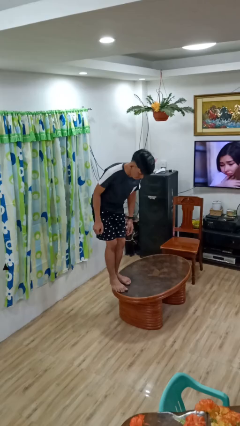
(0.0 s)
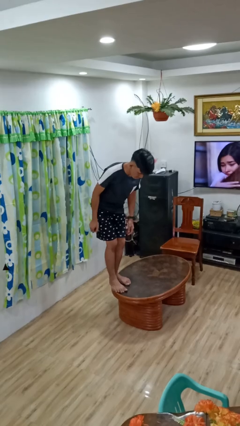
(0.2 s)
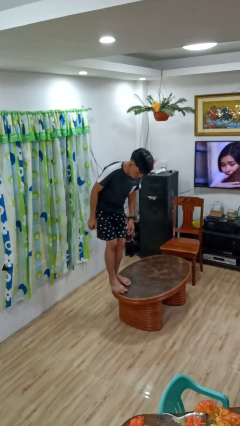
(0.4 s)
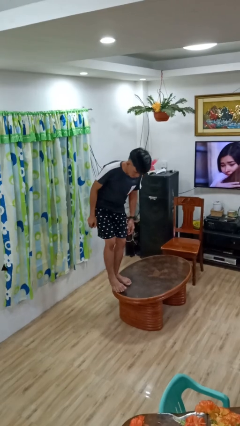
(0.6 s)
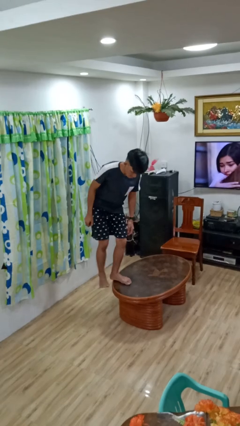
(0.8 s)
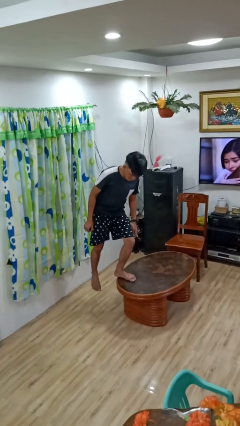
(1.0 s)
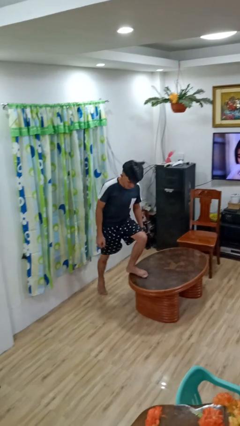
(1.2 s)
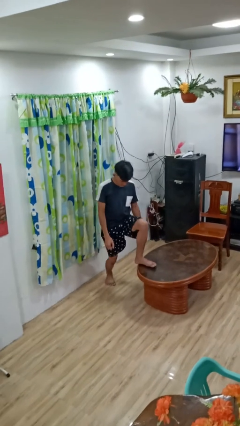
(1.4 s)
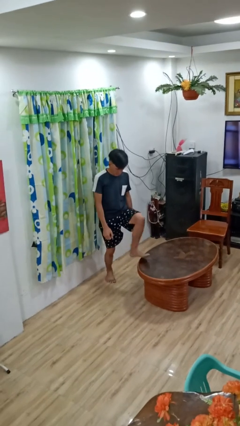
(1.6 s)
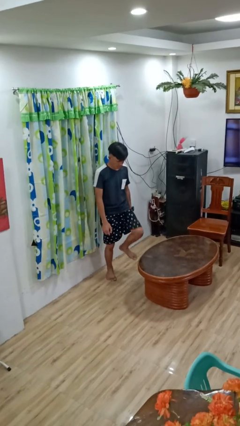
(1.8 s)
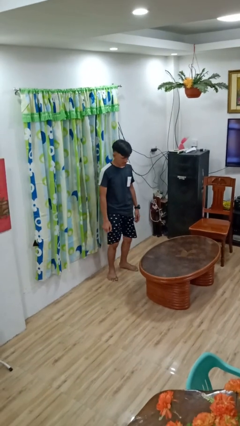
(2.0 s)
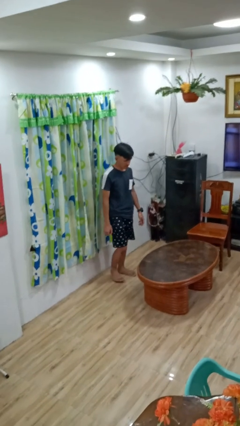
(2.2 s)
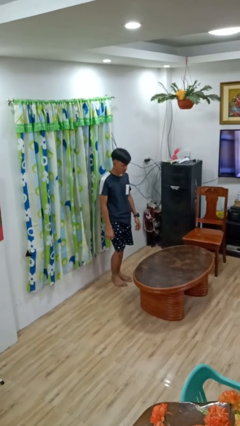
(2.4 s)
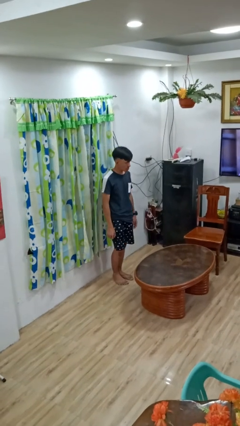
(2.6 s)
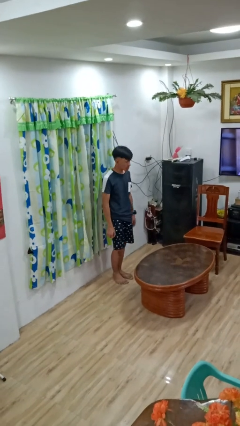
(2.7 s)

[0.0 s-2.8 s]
person climbs off table

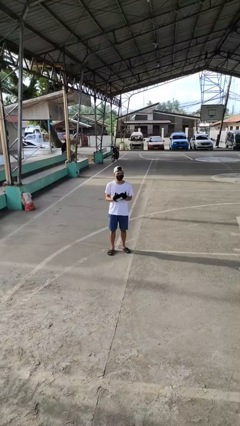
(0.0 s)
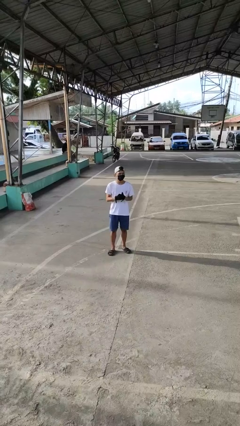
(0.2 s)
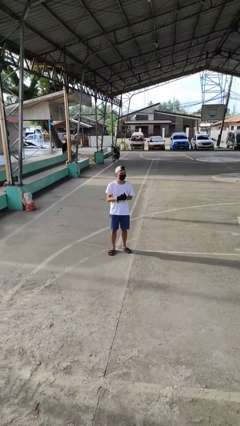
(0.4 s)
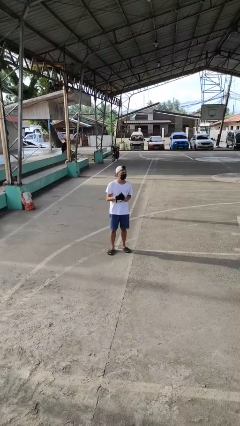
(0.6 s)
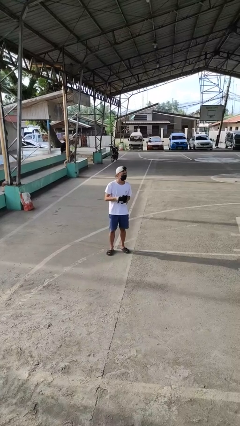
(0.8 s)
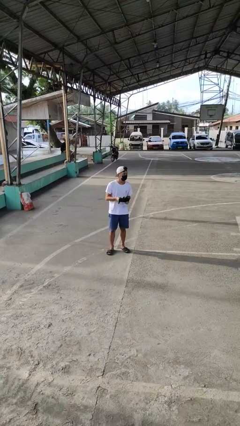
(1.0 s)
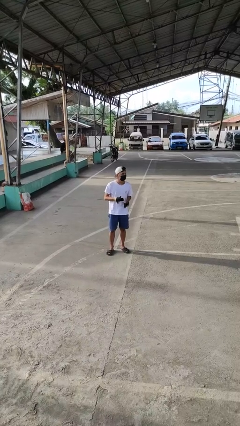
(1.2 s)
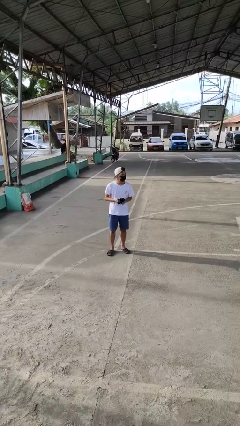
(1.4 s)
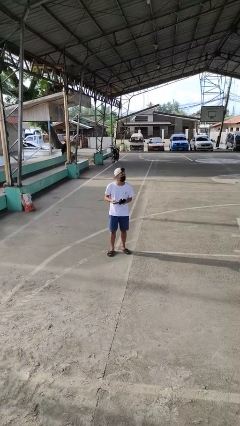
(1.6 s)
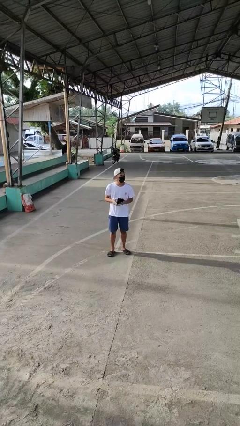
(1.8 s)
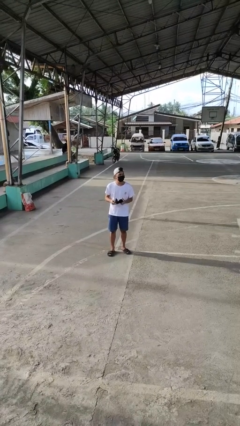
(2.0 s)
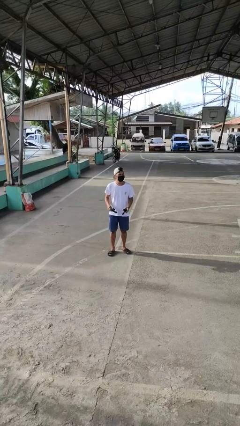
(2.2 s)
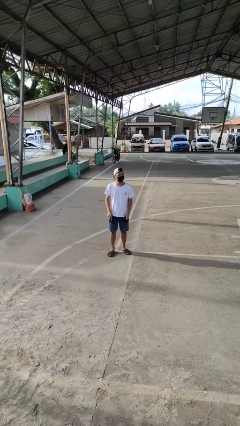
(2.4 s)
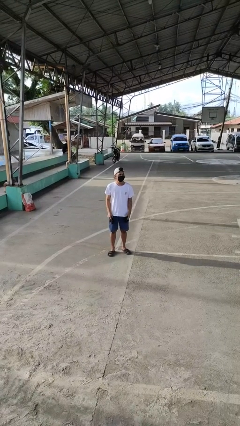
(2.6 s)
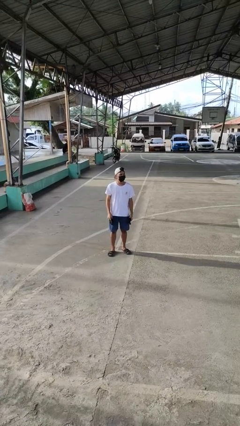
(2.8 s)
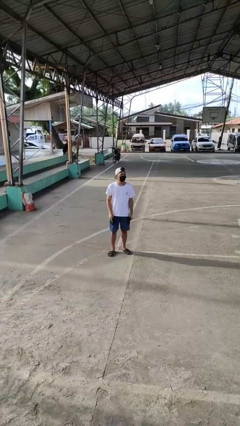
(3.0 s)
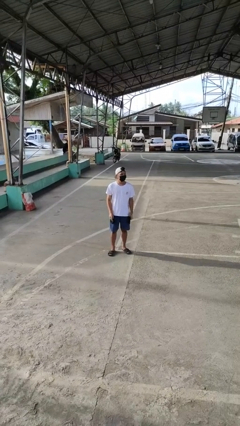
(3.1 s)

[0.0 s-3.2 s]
person takes off gloves

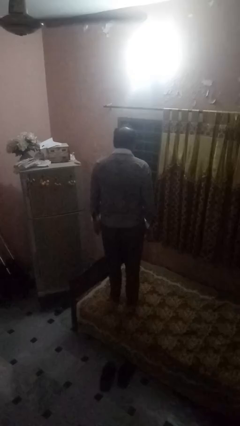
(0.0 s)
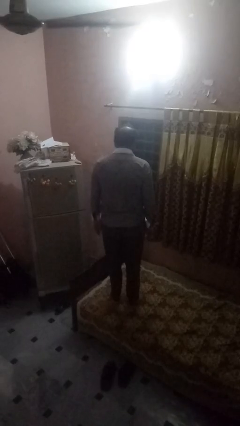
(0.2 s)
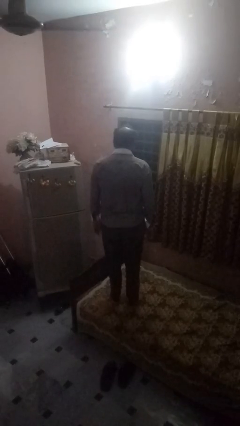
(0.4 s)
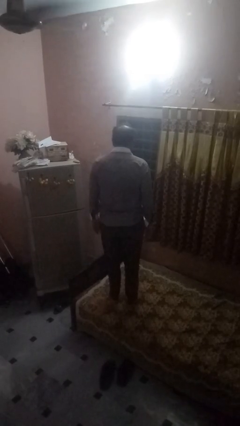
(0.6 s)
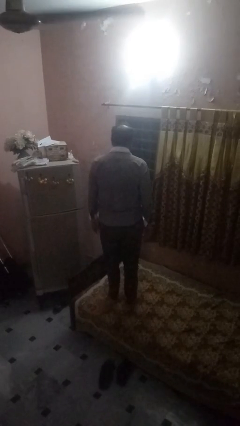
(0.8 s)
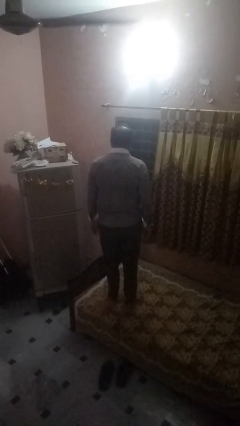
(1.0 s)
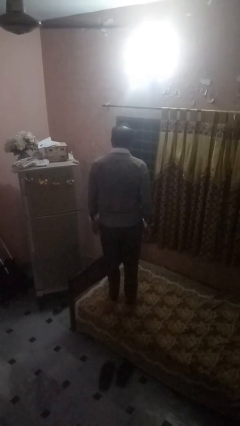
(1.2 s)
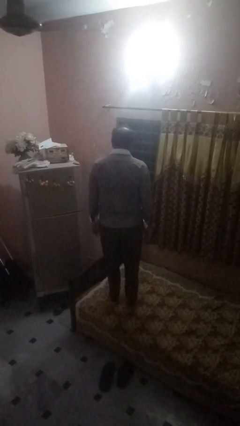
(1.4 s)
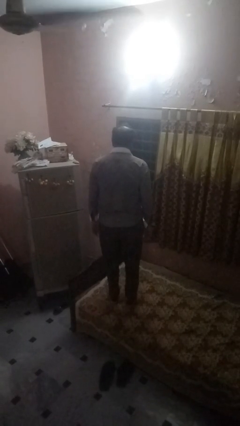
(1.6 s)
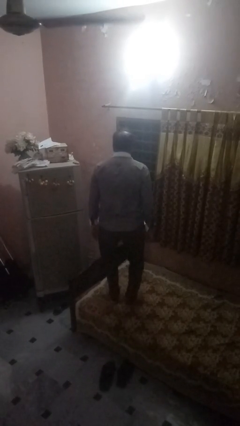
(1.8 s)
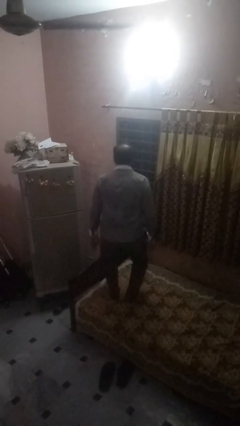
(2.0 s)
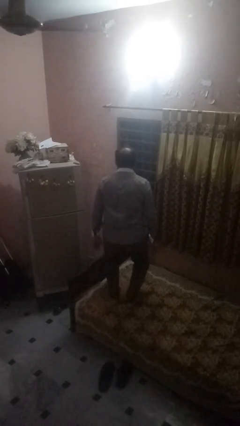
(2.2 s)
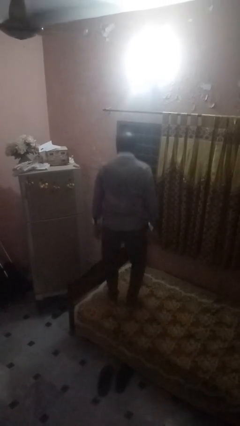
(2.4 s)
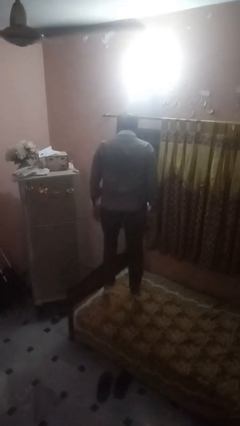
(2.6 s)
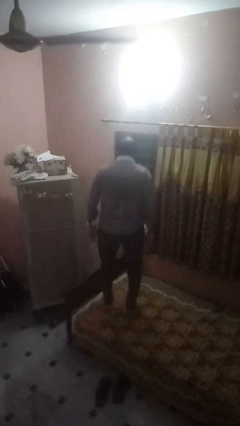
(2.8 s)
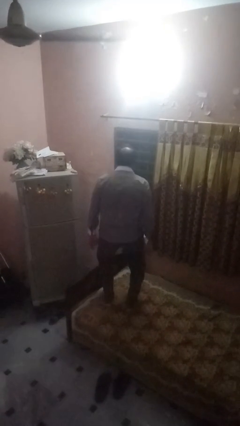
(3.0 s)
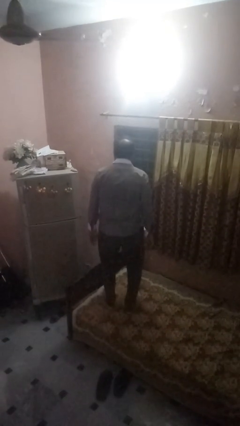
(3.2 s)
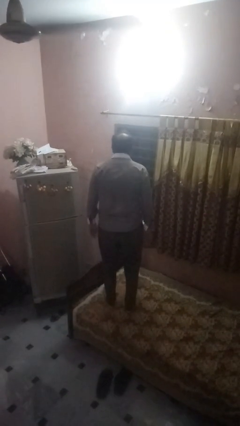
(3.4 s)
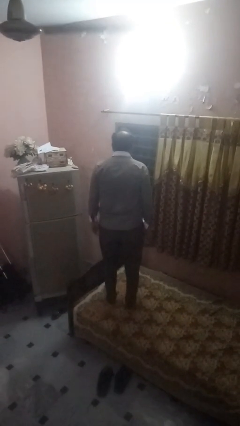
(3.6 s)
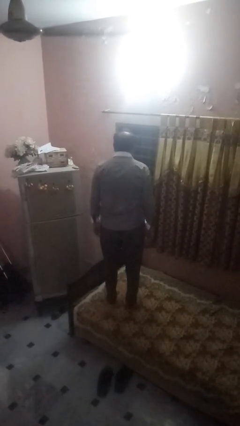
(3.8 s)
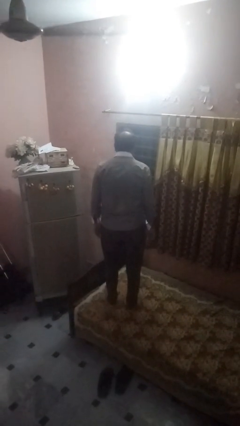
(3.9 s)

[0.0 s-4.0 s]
person jumps on bed

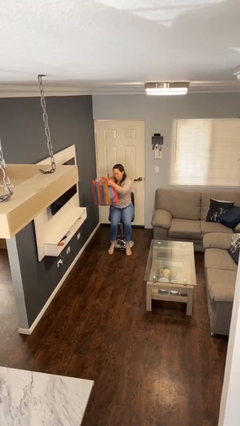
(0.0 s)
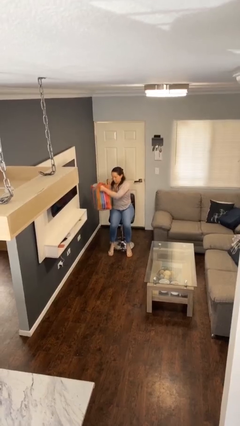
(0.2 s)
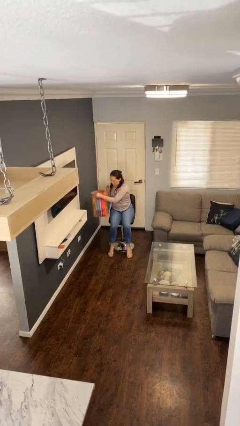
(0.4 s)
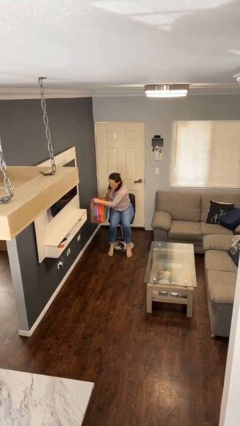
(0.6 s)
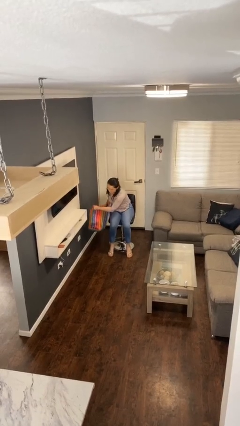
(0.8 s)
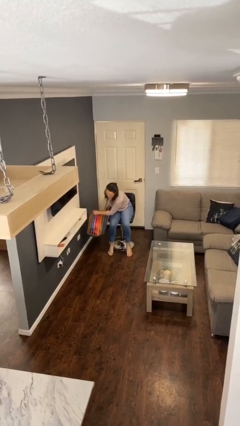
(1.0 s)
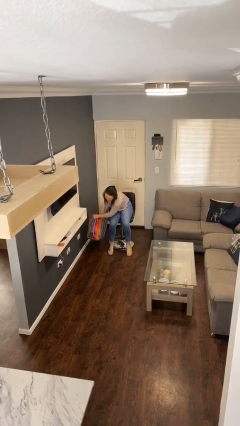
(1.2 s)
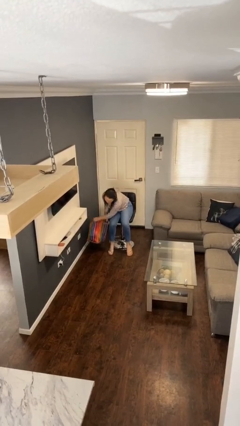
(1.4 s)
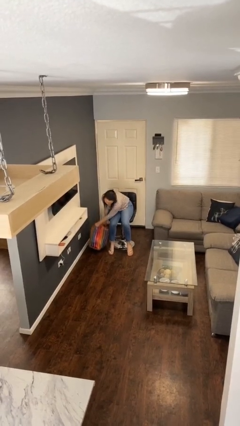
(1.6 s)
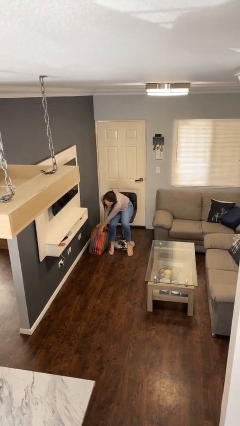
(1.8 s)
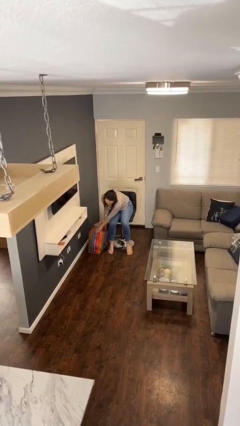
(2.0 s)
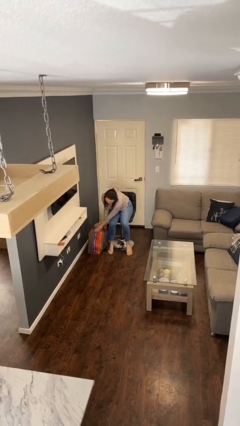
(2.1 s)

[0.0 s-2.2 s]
person puts down object on floor

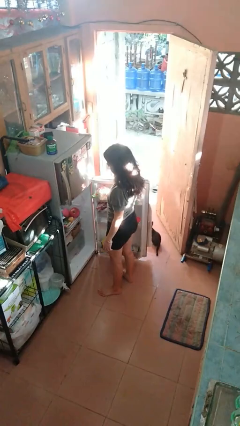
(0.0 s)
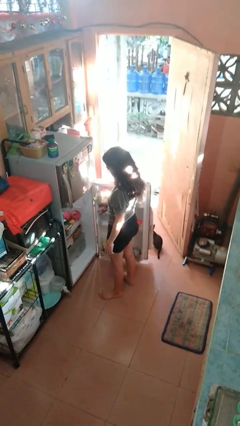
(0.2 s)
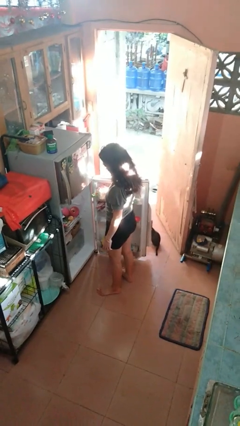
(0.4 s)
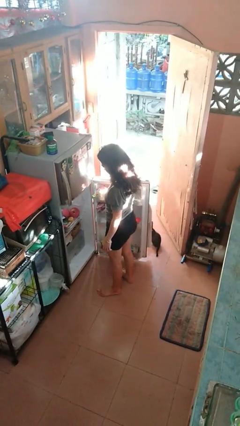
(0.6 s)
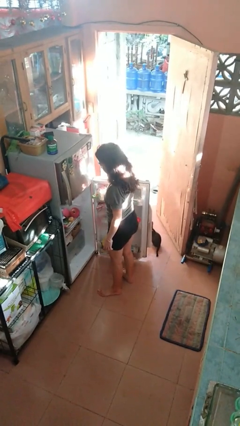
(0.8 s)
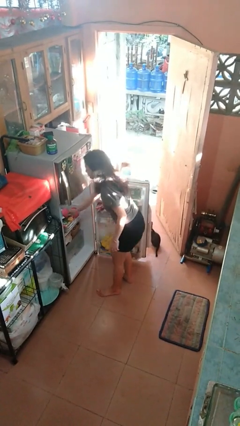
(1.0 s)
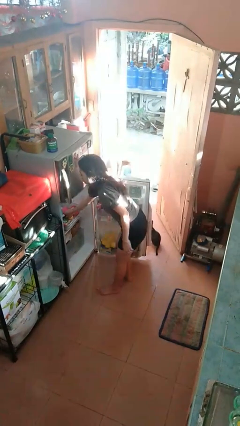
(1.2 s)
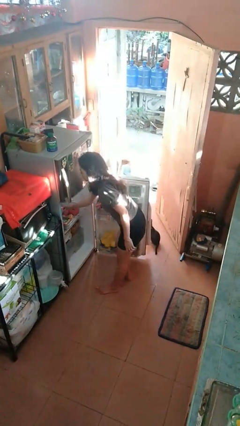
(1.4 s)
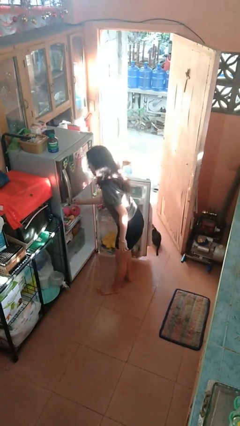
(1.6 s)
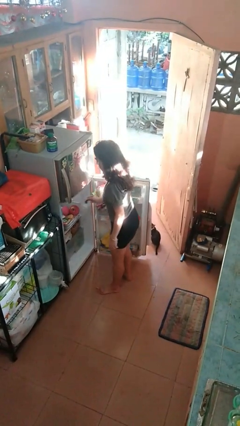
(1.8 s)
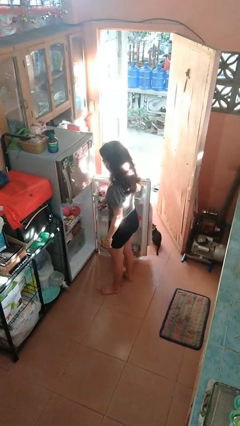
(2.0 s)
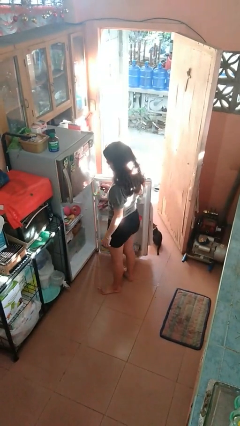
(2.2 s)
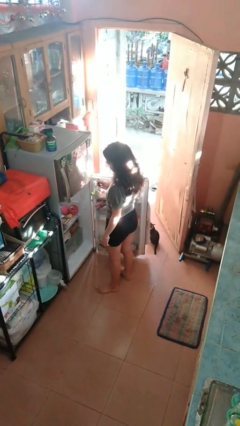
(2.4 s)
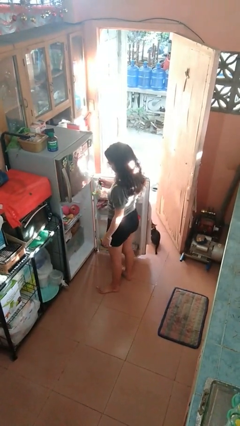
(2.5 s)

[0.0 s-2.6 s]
person takes object from refrigerator

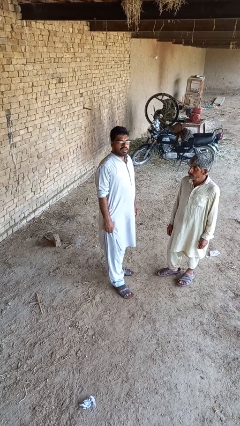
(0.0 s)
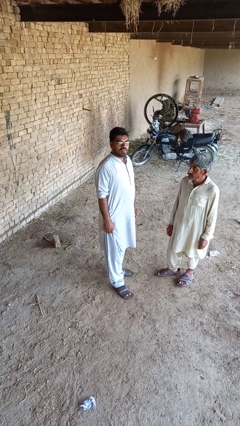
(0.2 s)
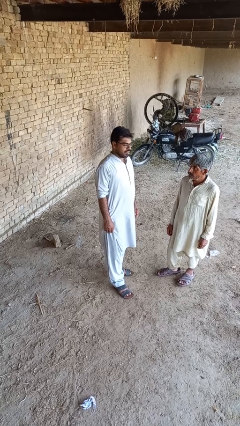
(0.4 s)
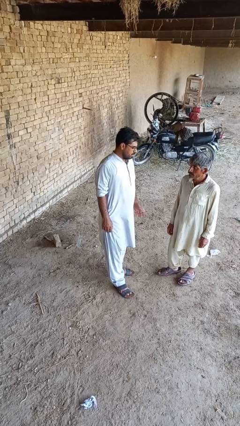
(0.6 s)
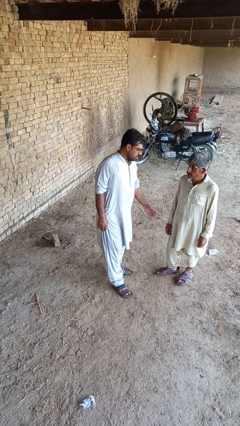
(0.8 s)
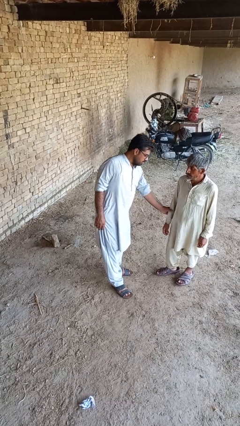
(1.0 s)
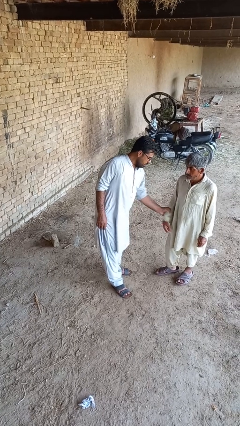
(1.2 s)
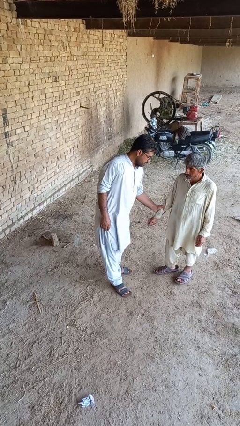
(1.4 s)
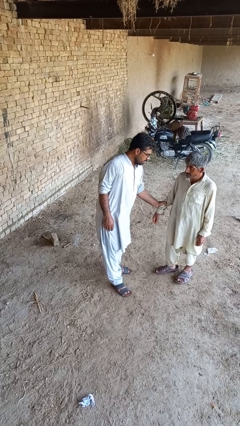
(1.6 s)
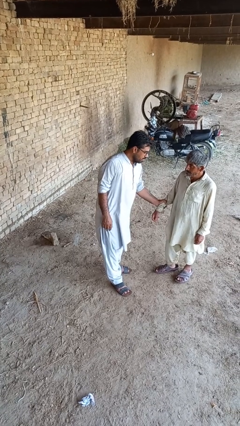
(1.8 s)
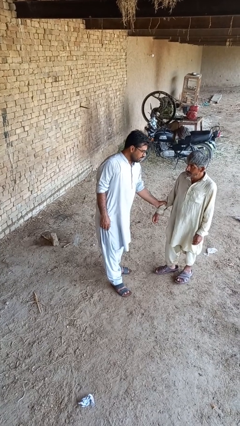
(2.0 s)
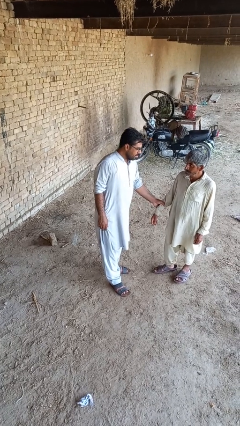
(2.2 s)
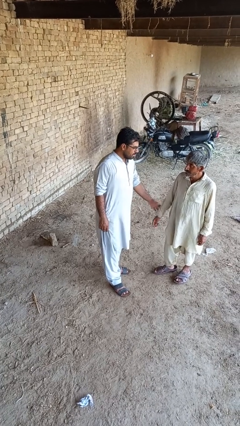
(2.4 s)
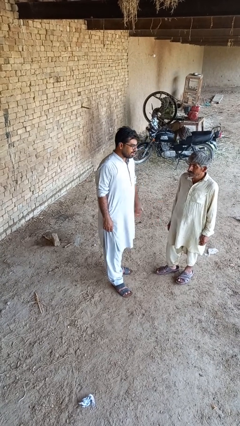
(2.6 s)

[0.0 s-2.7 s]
person grabs person by forearm
